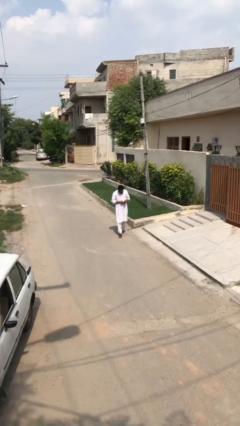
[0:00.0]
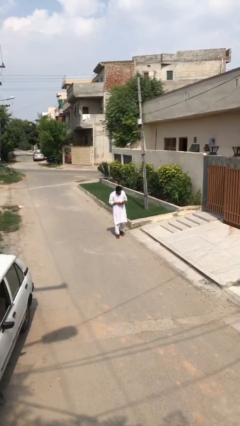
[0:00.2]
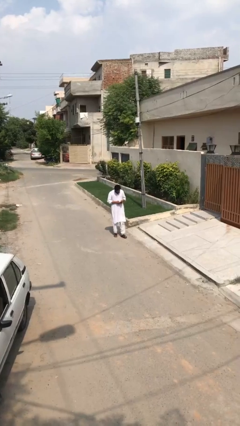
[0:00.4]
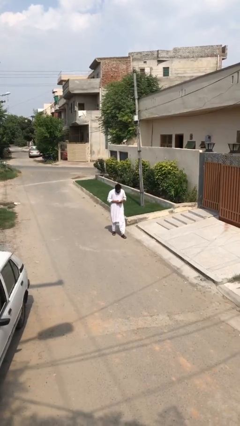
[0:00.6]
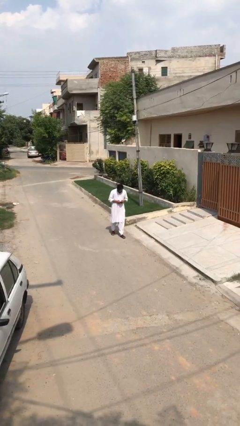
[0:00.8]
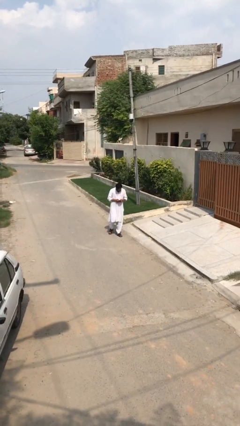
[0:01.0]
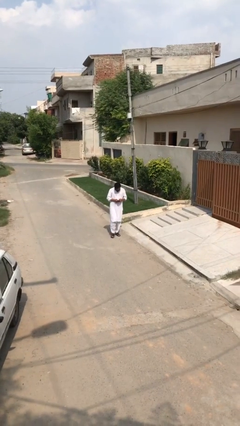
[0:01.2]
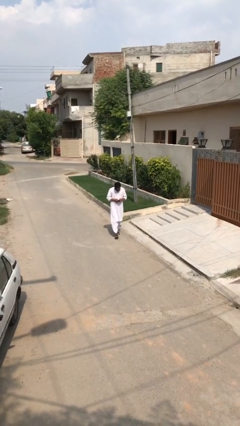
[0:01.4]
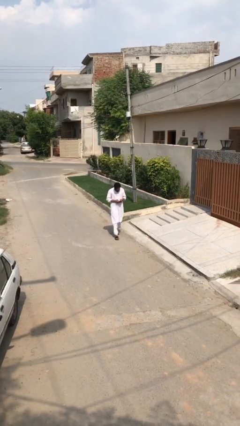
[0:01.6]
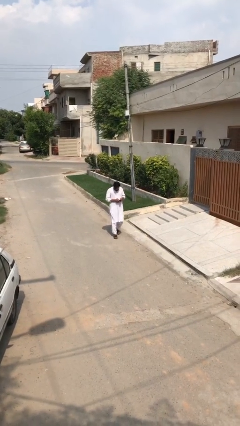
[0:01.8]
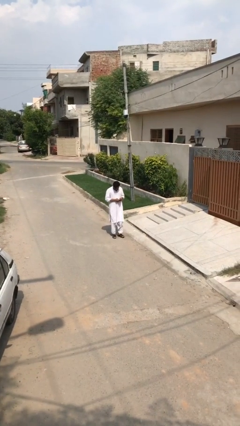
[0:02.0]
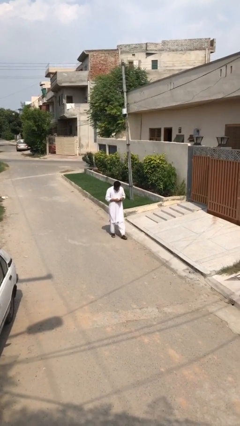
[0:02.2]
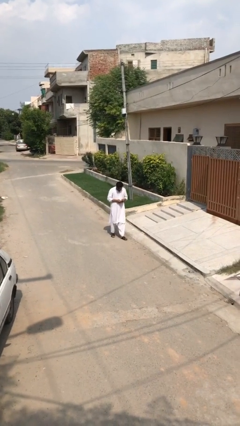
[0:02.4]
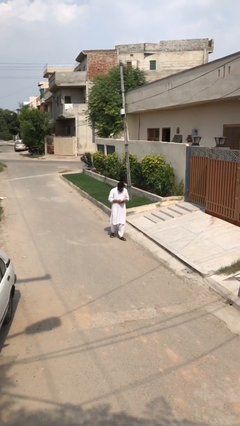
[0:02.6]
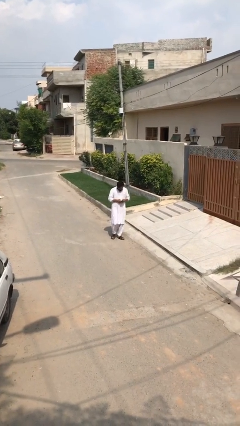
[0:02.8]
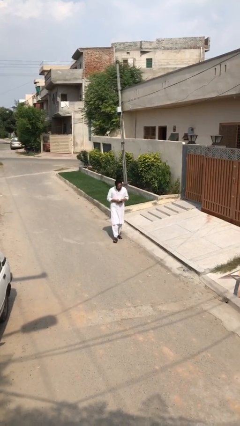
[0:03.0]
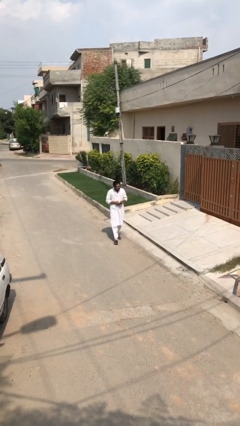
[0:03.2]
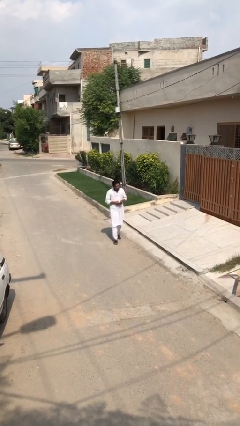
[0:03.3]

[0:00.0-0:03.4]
person texts on phone

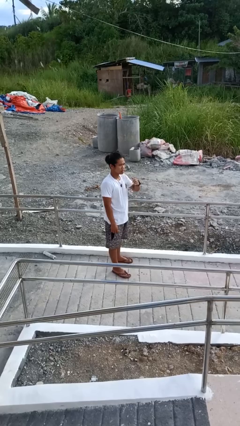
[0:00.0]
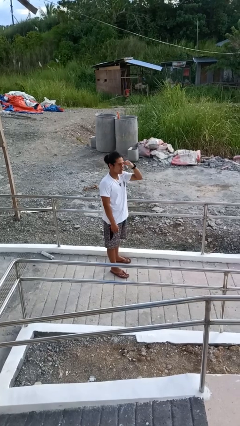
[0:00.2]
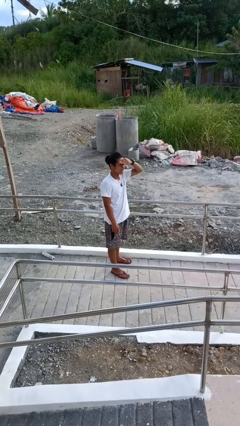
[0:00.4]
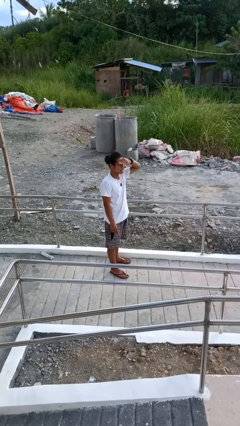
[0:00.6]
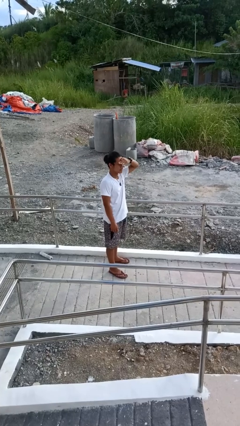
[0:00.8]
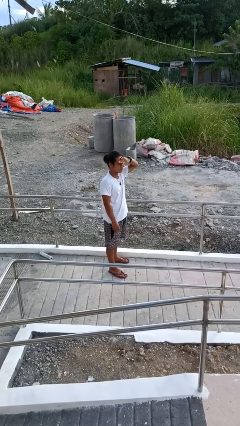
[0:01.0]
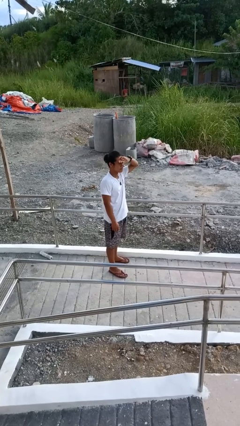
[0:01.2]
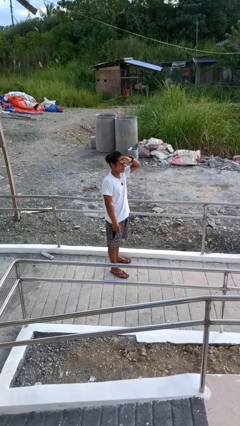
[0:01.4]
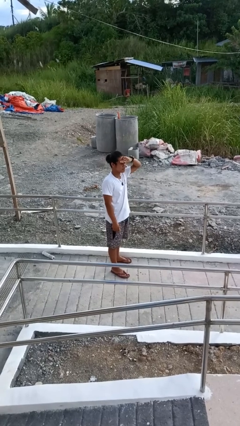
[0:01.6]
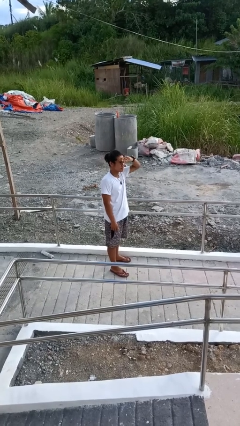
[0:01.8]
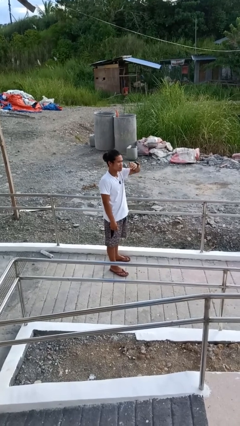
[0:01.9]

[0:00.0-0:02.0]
person shades eyes

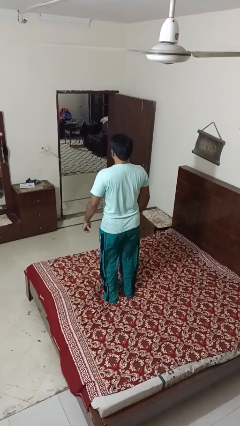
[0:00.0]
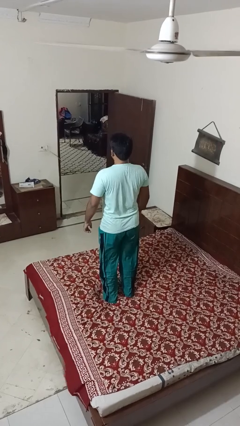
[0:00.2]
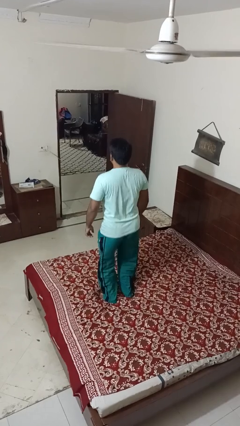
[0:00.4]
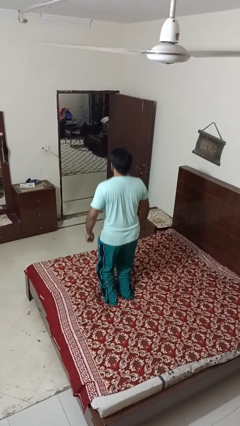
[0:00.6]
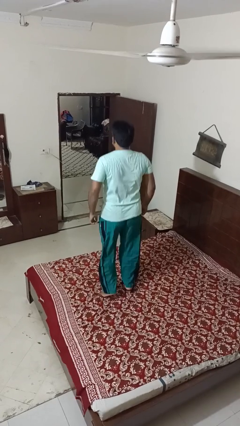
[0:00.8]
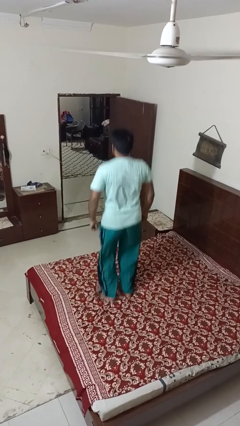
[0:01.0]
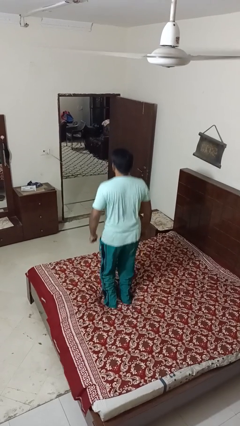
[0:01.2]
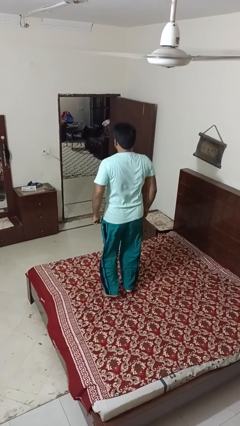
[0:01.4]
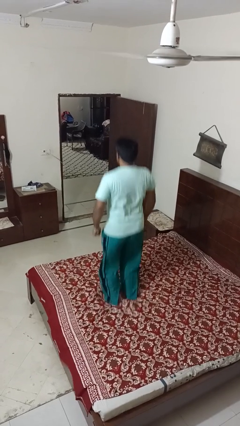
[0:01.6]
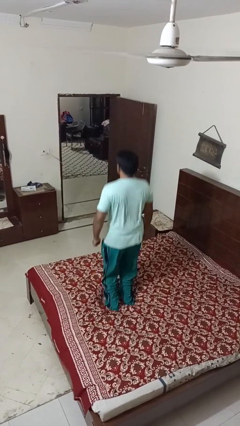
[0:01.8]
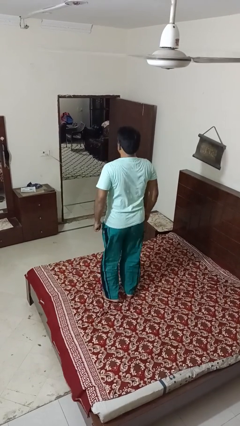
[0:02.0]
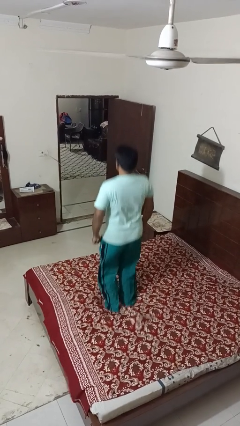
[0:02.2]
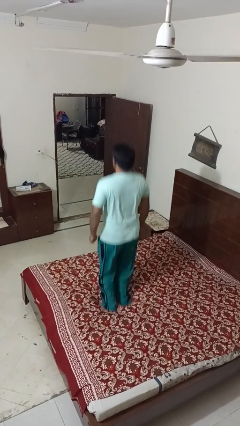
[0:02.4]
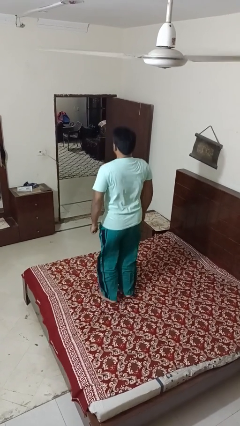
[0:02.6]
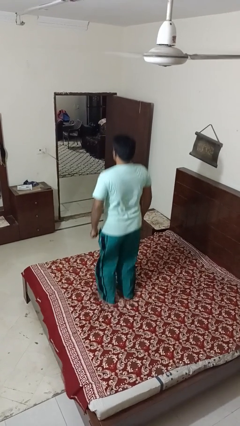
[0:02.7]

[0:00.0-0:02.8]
person jumps on bed

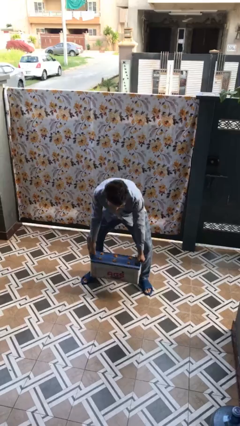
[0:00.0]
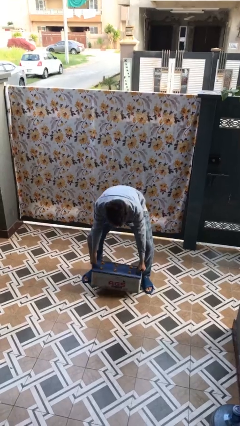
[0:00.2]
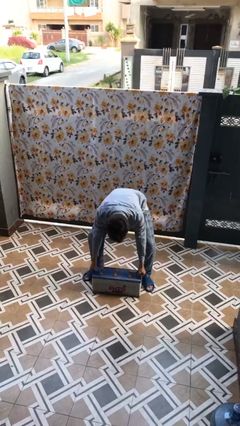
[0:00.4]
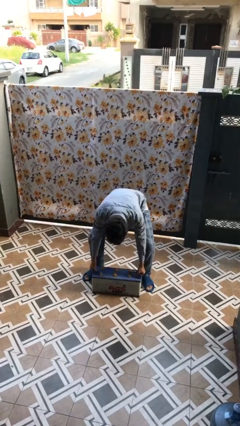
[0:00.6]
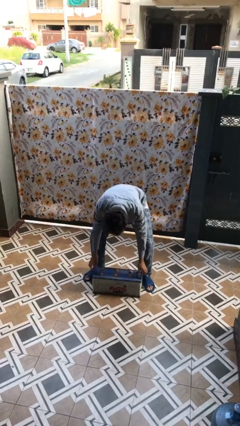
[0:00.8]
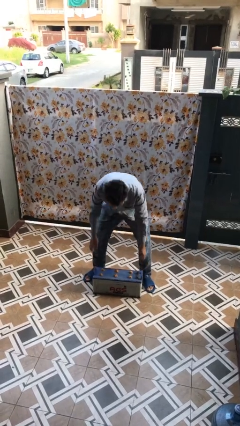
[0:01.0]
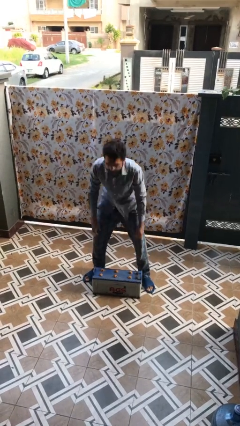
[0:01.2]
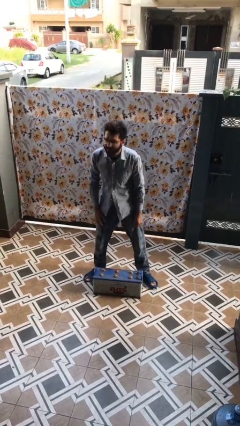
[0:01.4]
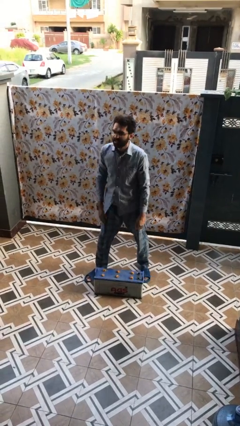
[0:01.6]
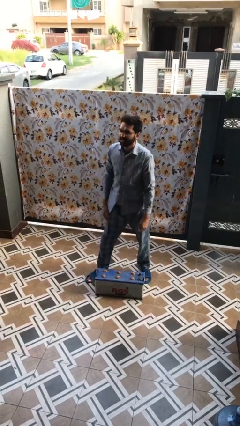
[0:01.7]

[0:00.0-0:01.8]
person puts down object on floor

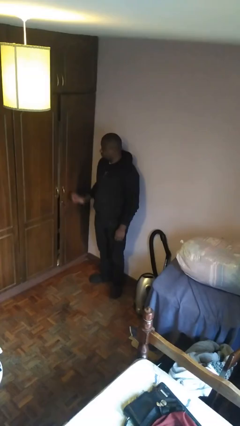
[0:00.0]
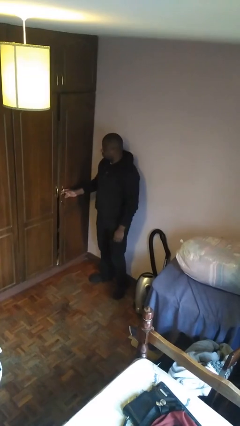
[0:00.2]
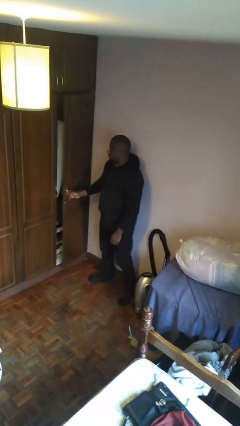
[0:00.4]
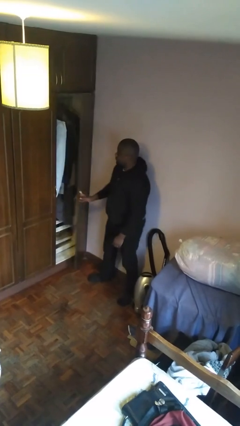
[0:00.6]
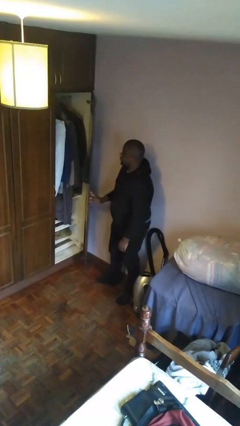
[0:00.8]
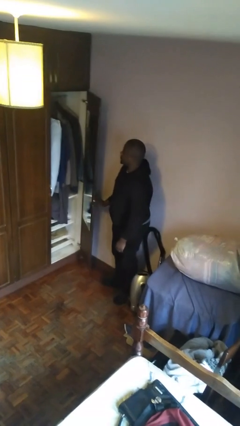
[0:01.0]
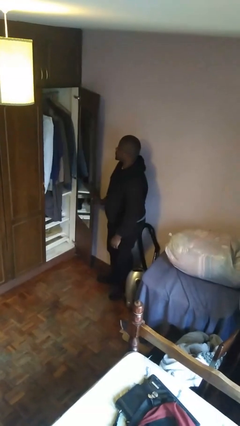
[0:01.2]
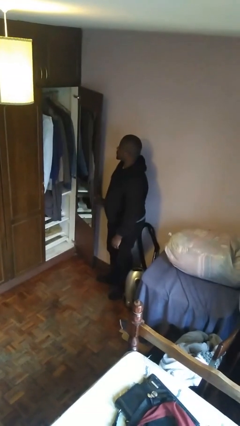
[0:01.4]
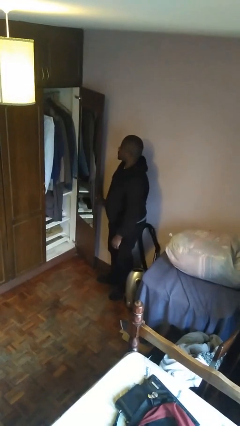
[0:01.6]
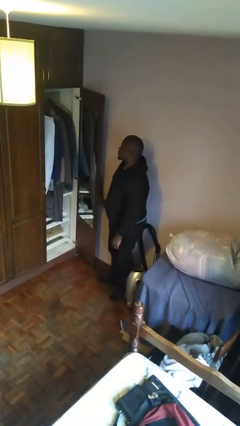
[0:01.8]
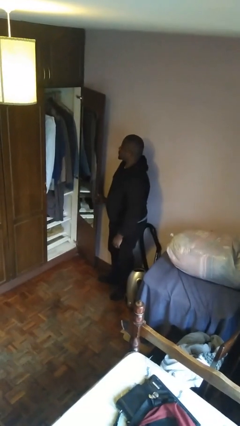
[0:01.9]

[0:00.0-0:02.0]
person opens closet door

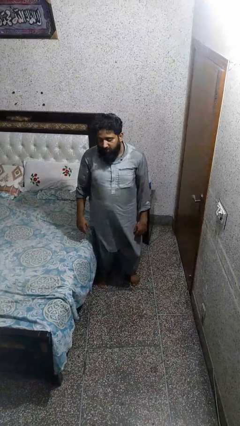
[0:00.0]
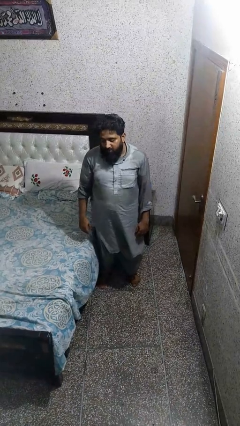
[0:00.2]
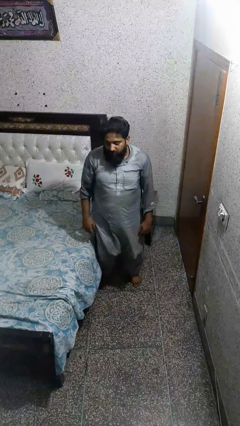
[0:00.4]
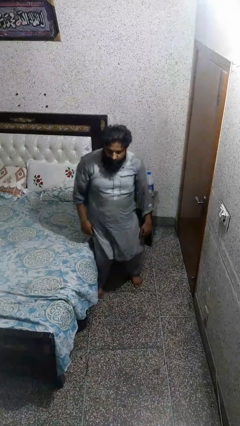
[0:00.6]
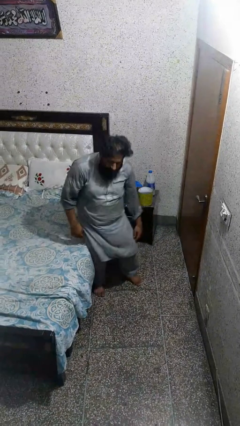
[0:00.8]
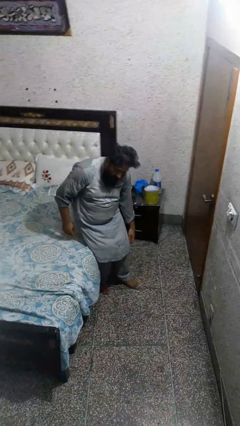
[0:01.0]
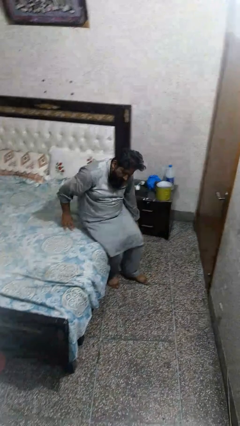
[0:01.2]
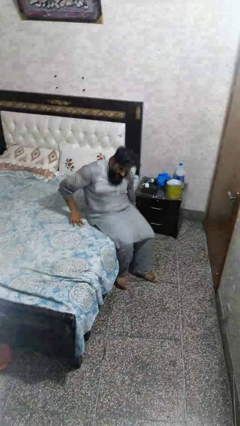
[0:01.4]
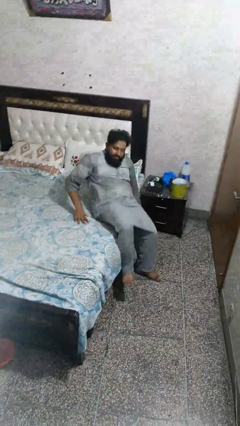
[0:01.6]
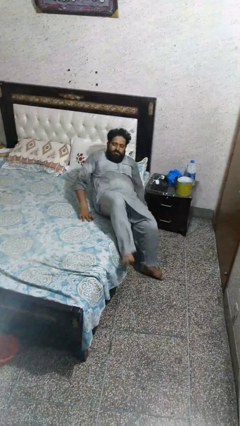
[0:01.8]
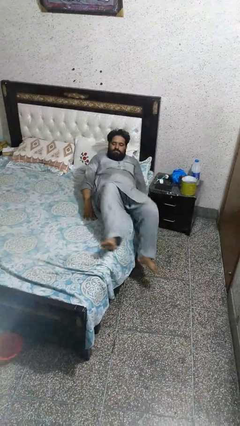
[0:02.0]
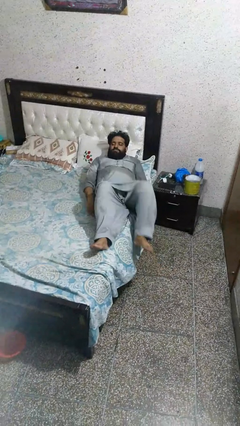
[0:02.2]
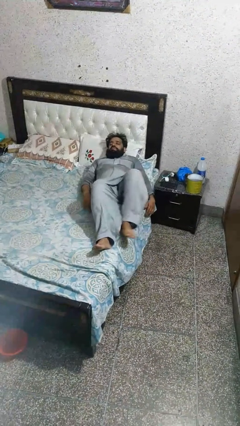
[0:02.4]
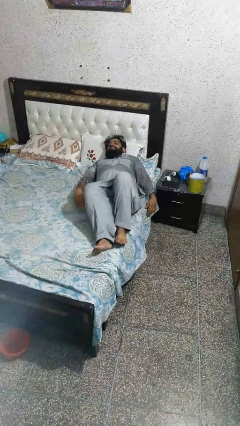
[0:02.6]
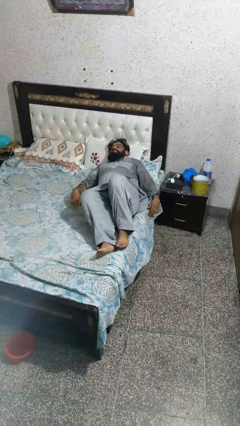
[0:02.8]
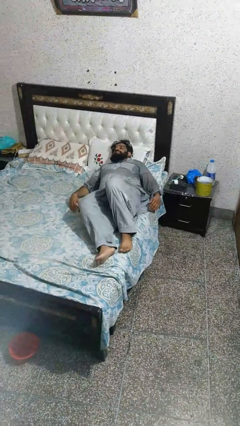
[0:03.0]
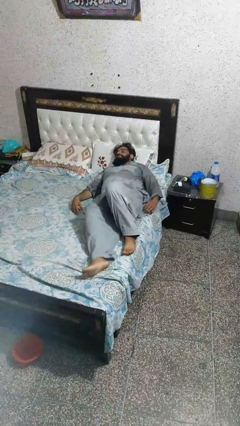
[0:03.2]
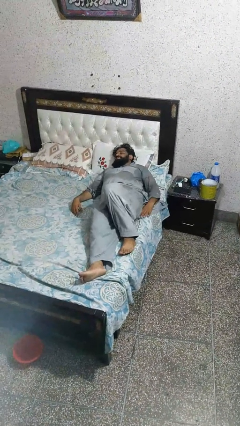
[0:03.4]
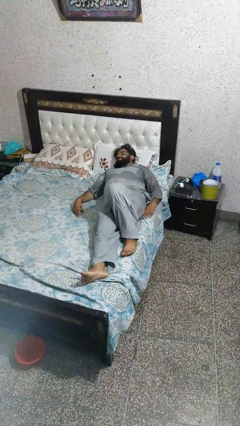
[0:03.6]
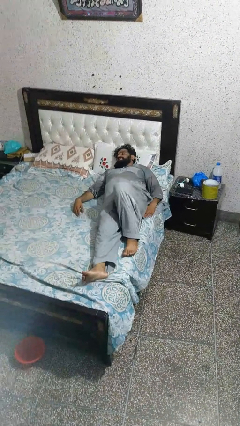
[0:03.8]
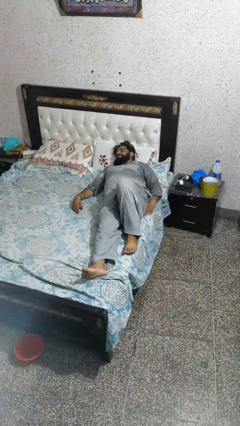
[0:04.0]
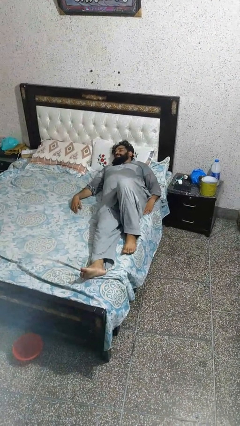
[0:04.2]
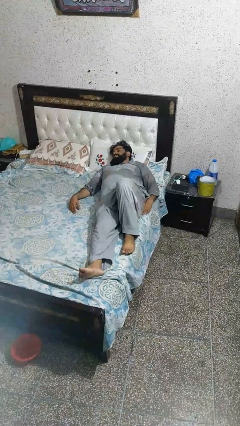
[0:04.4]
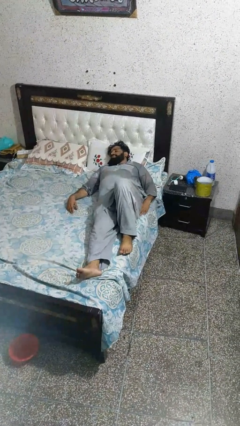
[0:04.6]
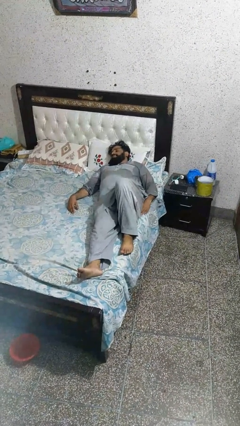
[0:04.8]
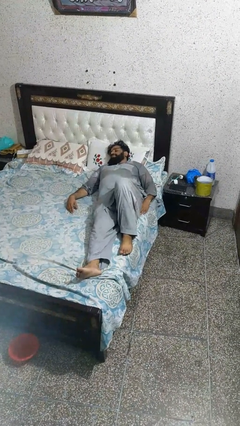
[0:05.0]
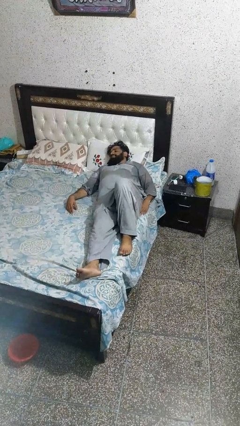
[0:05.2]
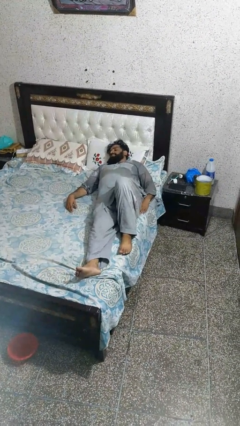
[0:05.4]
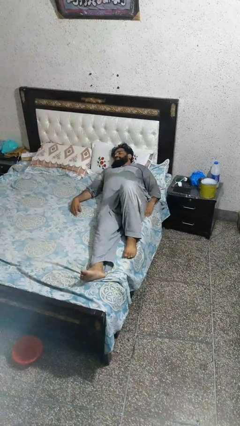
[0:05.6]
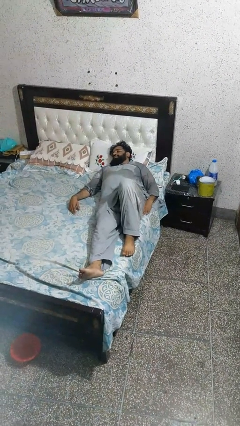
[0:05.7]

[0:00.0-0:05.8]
person lies down on bed
